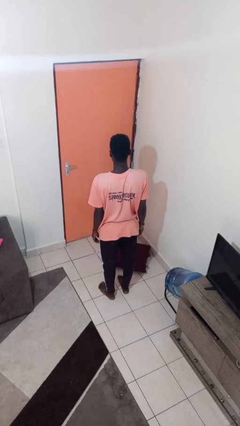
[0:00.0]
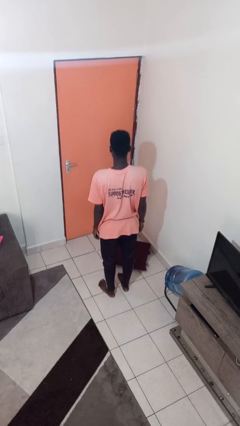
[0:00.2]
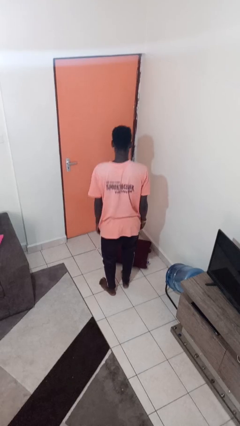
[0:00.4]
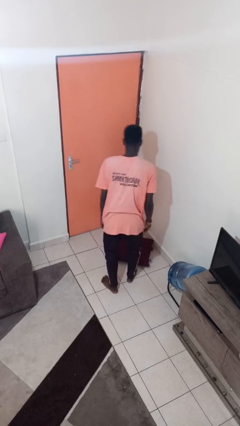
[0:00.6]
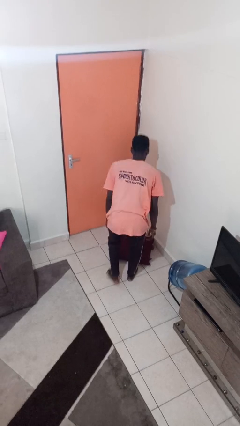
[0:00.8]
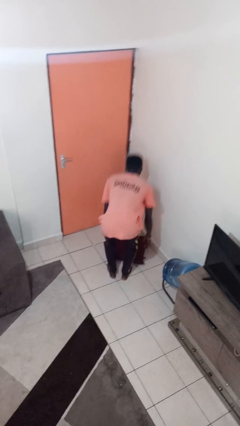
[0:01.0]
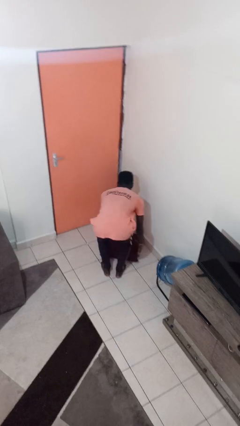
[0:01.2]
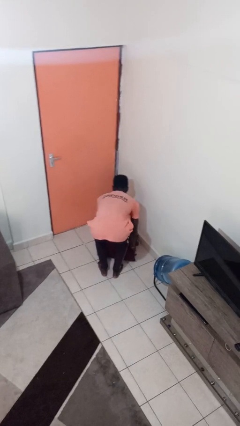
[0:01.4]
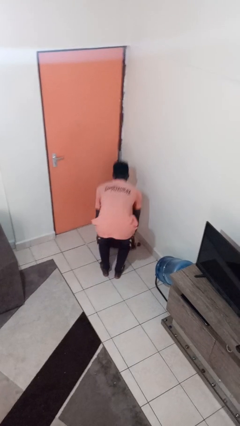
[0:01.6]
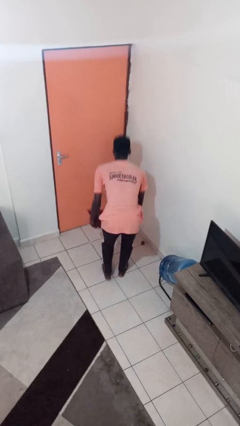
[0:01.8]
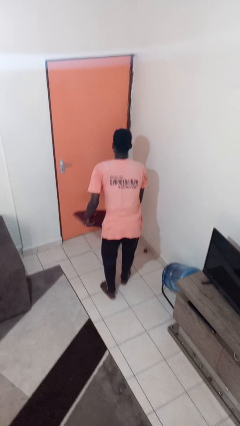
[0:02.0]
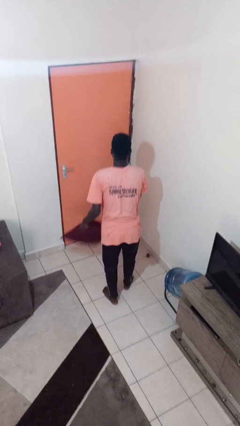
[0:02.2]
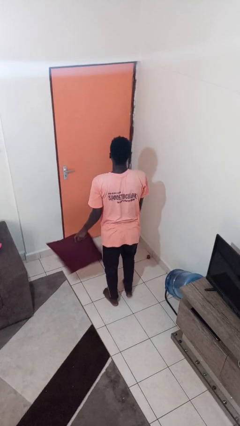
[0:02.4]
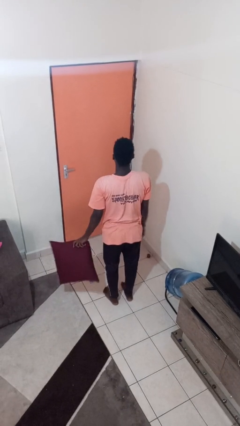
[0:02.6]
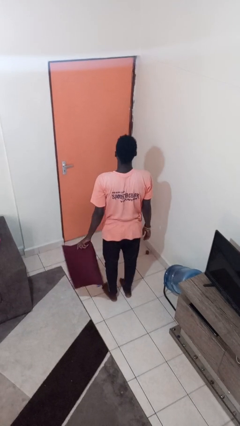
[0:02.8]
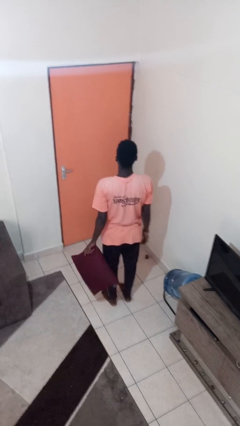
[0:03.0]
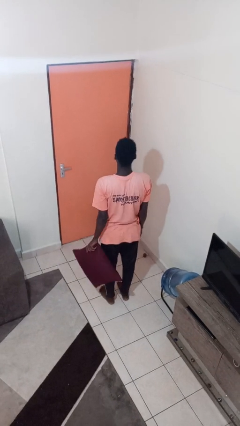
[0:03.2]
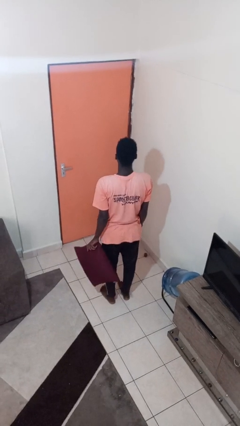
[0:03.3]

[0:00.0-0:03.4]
person picks up object from floor

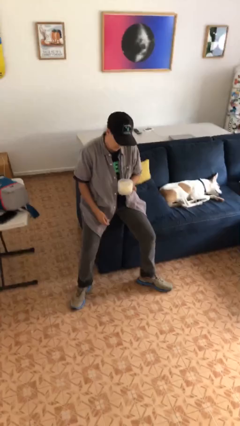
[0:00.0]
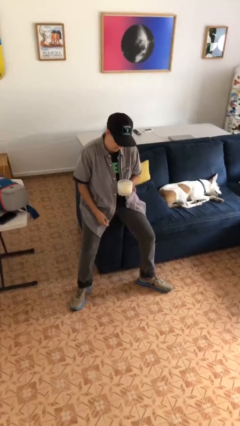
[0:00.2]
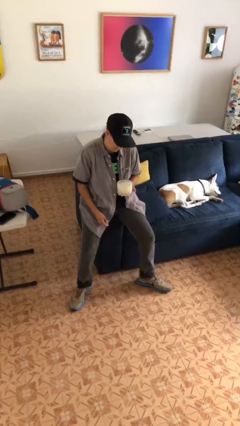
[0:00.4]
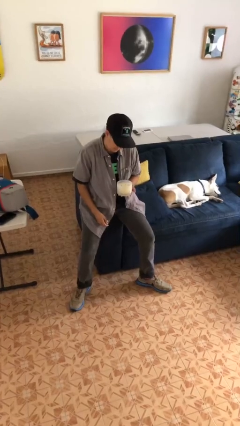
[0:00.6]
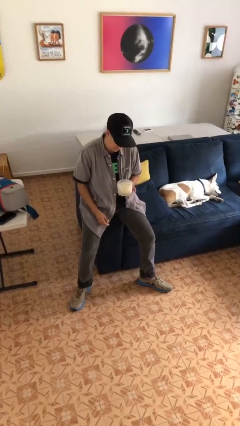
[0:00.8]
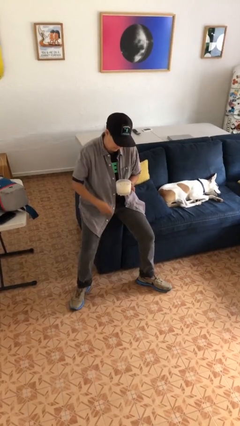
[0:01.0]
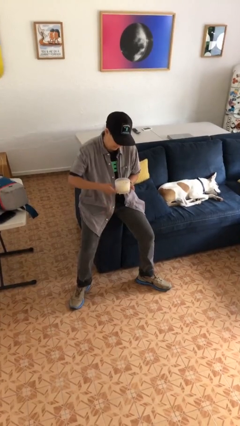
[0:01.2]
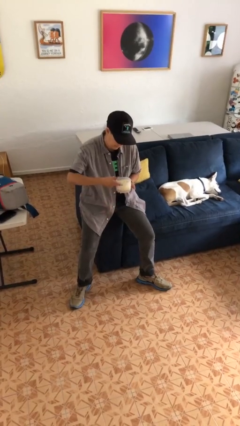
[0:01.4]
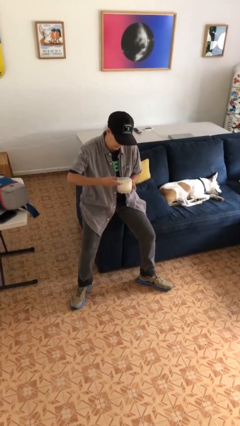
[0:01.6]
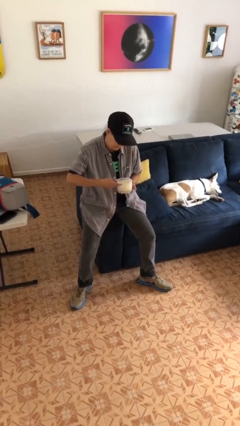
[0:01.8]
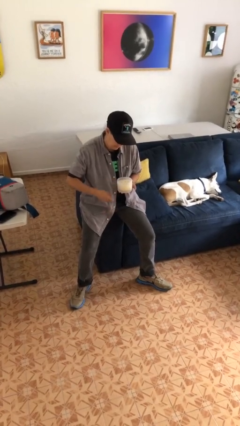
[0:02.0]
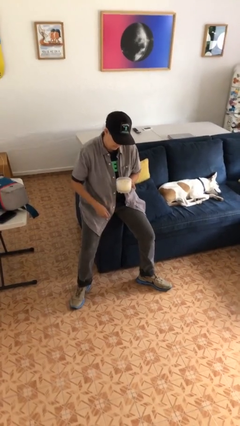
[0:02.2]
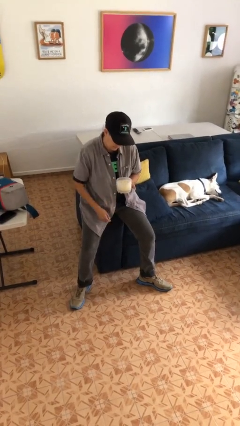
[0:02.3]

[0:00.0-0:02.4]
person taps object with finger

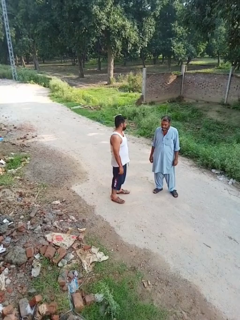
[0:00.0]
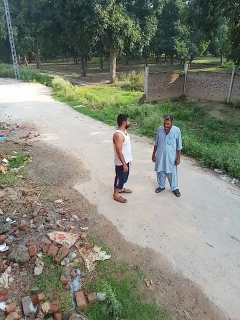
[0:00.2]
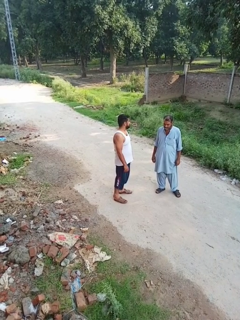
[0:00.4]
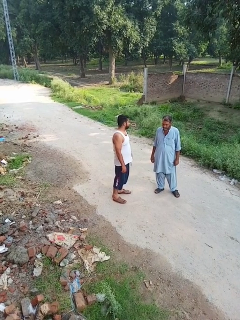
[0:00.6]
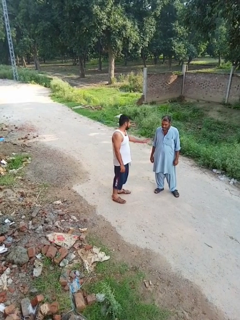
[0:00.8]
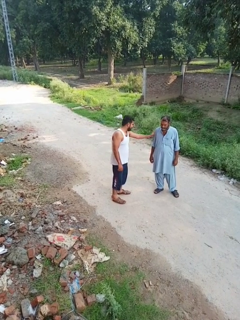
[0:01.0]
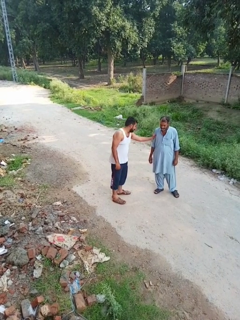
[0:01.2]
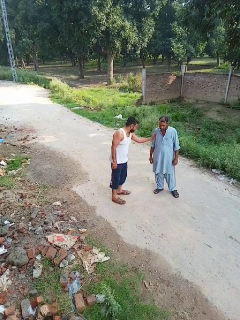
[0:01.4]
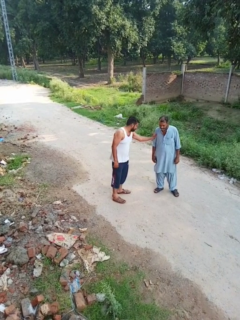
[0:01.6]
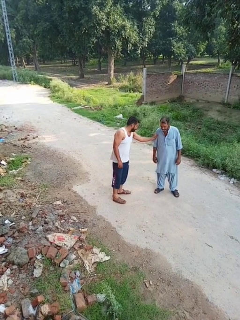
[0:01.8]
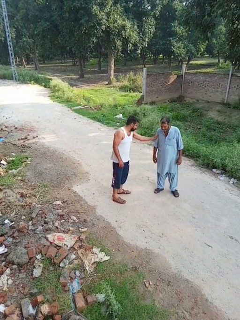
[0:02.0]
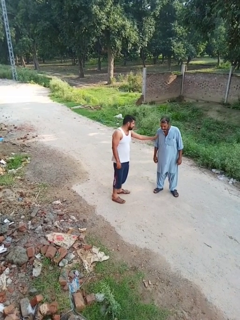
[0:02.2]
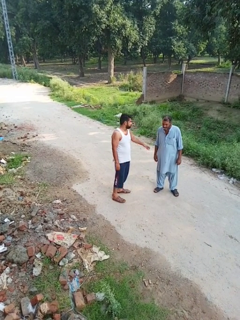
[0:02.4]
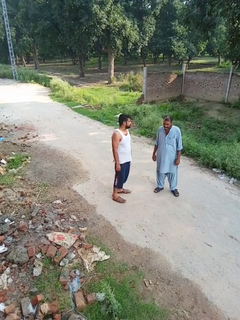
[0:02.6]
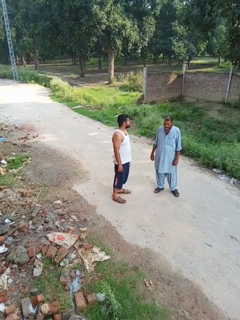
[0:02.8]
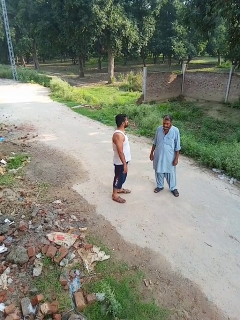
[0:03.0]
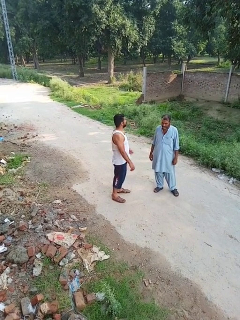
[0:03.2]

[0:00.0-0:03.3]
person grabs person by forearm

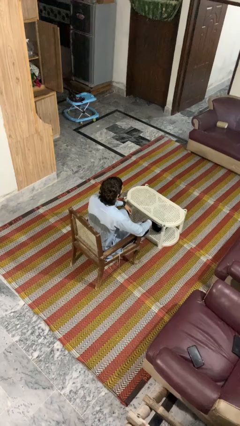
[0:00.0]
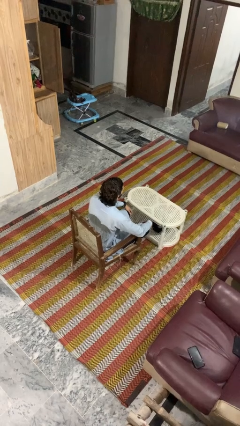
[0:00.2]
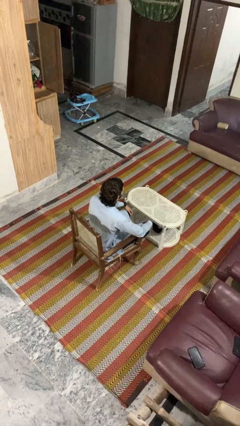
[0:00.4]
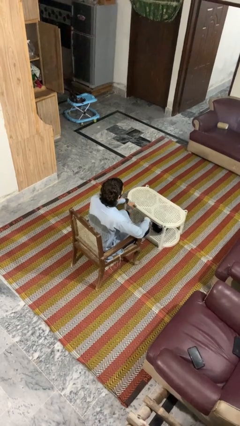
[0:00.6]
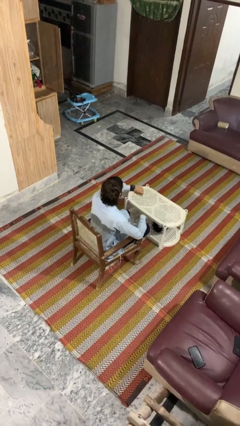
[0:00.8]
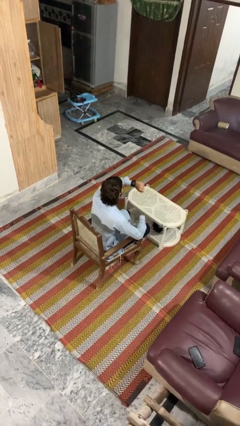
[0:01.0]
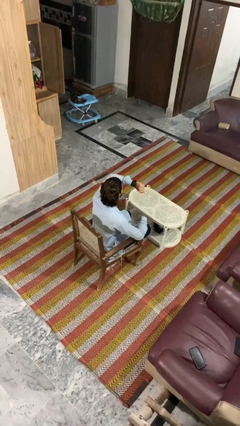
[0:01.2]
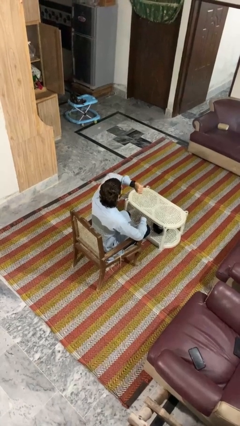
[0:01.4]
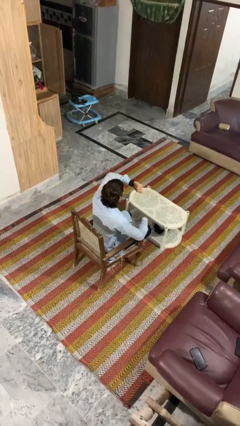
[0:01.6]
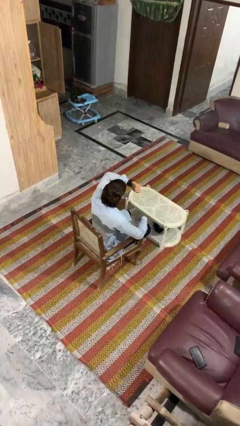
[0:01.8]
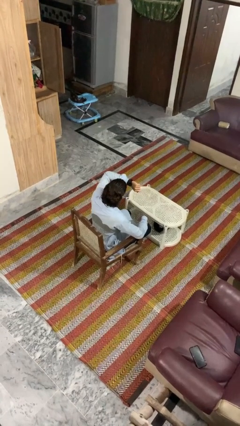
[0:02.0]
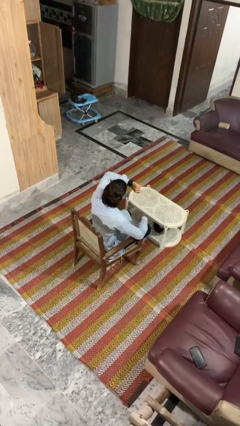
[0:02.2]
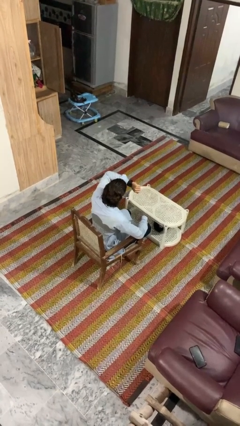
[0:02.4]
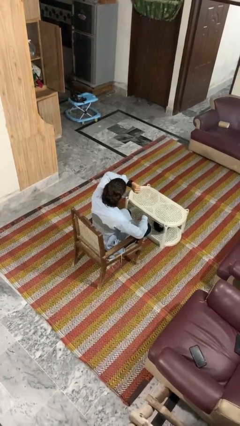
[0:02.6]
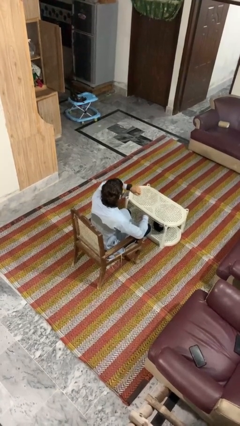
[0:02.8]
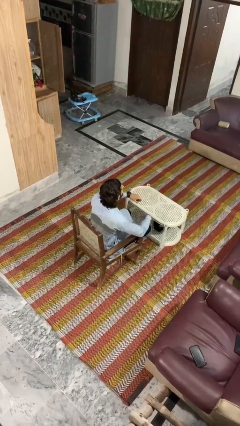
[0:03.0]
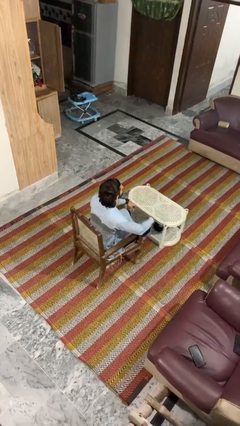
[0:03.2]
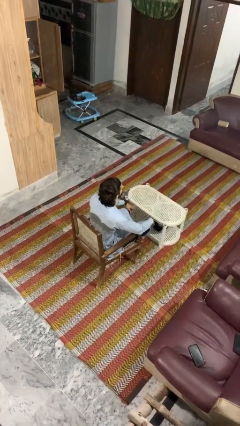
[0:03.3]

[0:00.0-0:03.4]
person looks at wristwatch

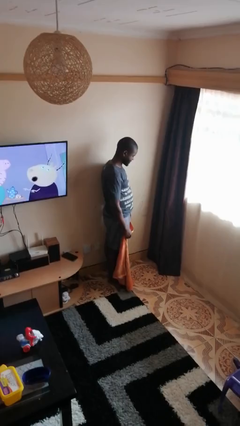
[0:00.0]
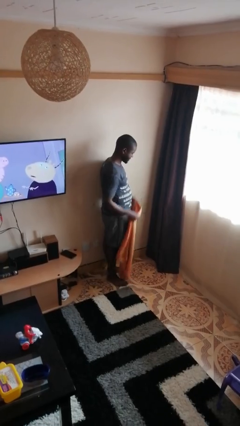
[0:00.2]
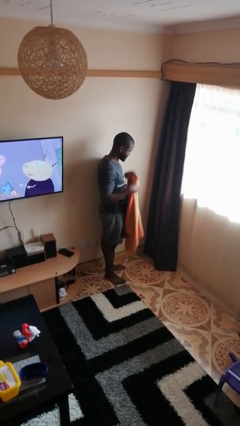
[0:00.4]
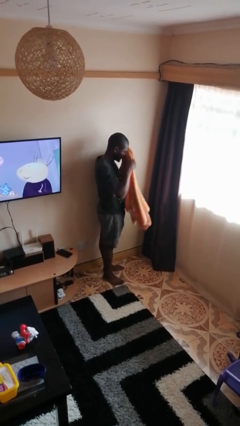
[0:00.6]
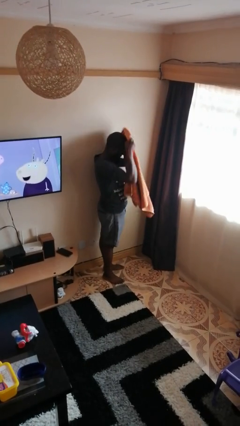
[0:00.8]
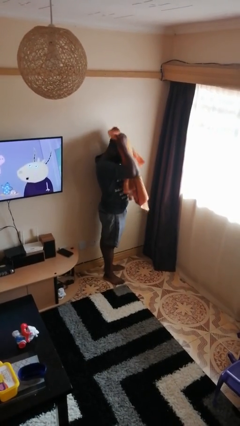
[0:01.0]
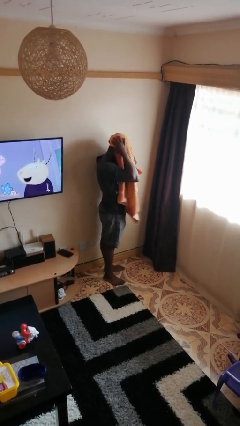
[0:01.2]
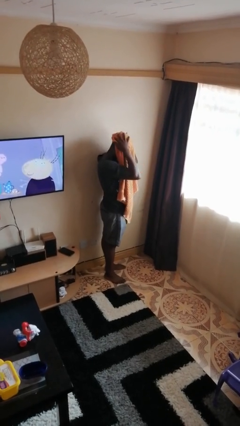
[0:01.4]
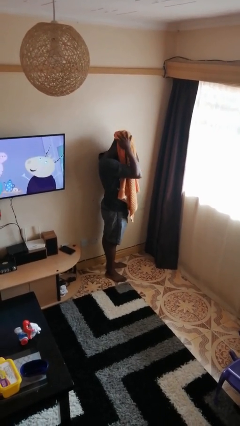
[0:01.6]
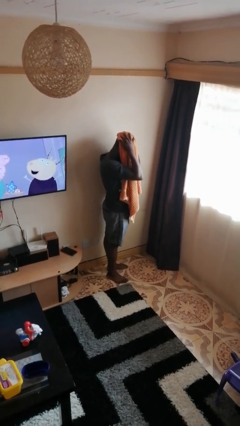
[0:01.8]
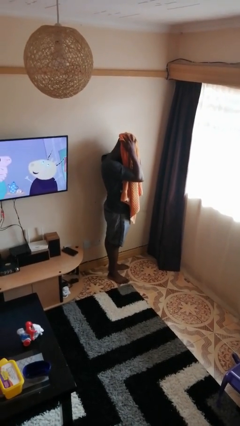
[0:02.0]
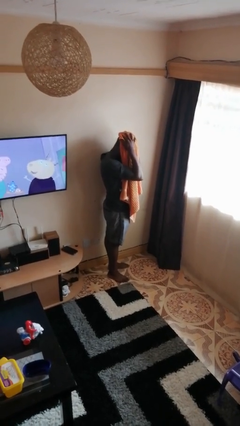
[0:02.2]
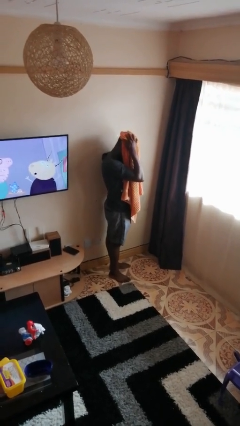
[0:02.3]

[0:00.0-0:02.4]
person dries hair with towel

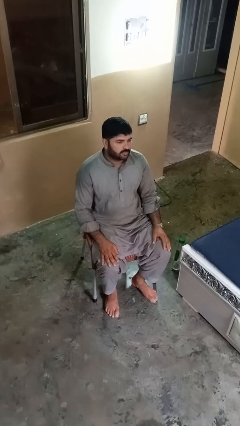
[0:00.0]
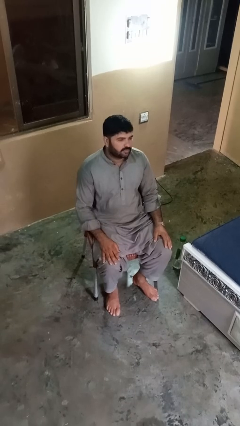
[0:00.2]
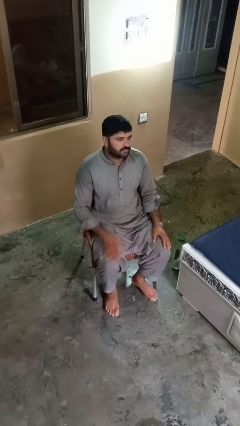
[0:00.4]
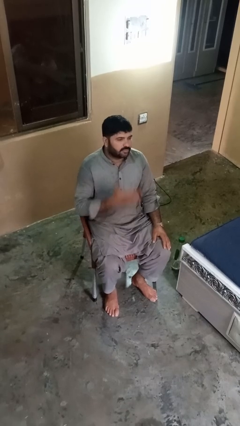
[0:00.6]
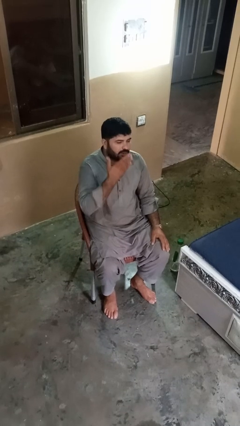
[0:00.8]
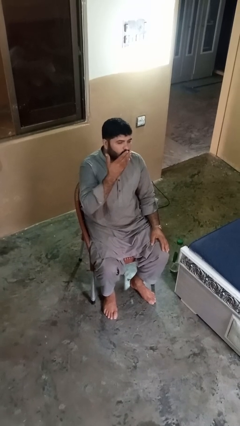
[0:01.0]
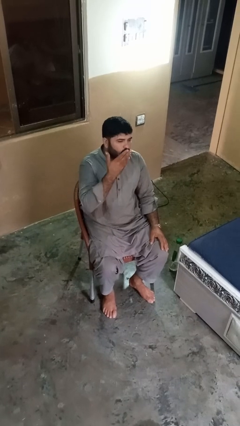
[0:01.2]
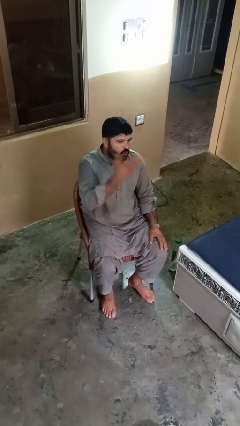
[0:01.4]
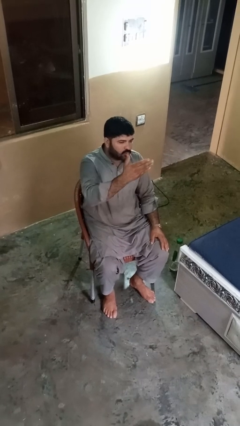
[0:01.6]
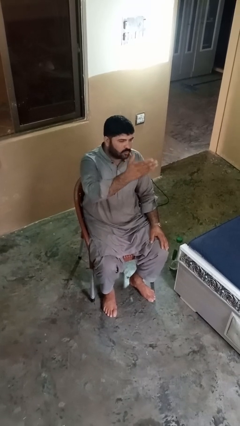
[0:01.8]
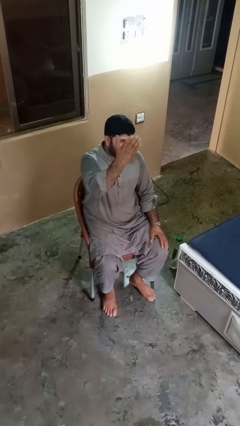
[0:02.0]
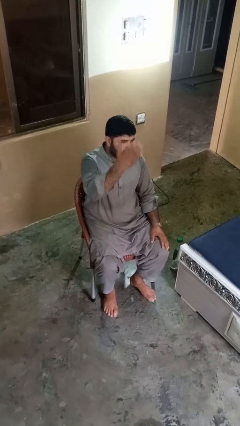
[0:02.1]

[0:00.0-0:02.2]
person gestures blow kiss

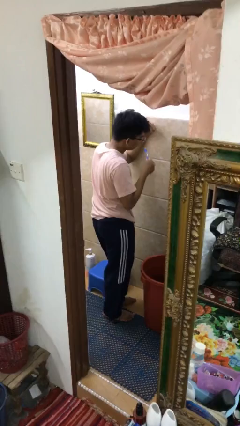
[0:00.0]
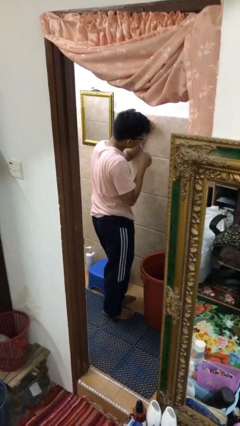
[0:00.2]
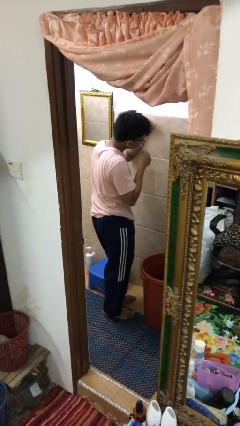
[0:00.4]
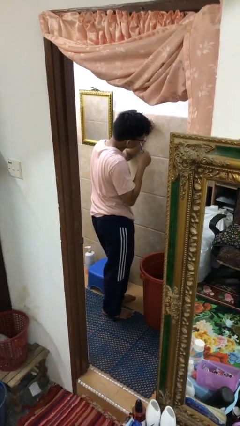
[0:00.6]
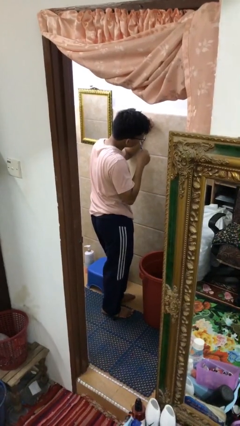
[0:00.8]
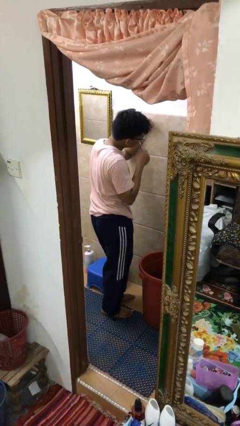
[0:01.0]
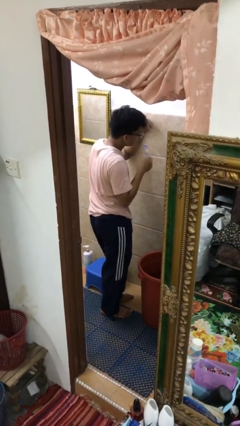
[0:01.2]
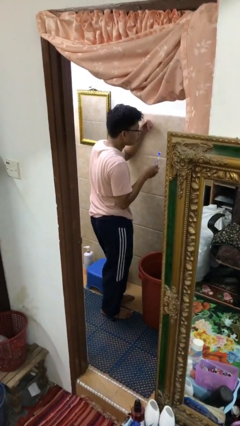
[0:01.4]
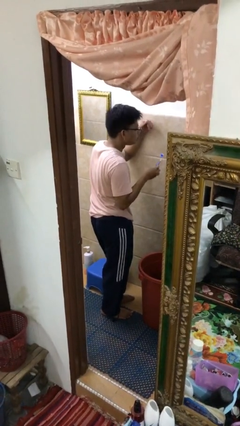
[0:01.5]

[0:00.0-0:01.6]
person brushes teeth
